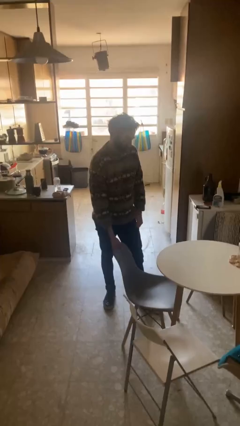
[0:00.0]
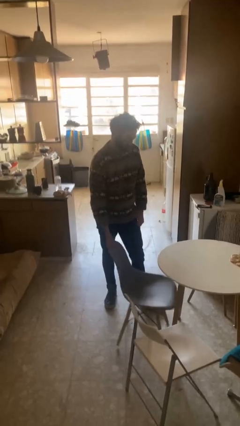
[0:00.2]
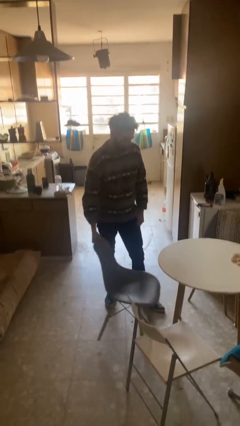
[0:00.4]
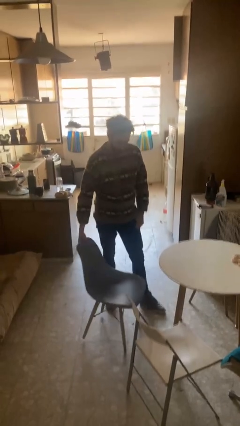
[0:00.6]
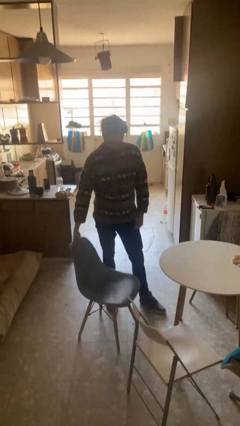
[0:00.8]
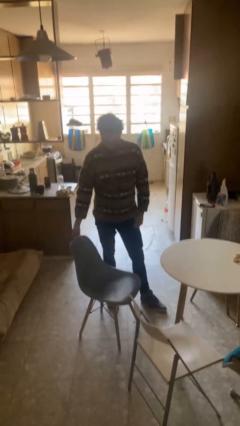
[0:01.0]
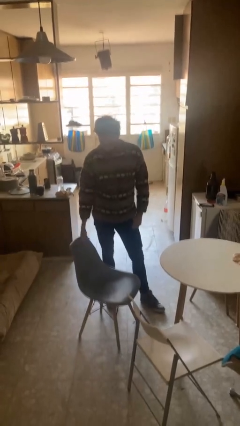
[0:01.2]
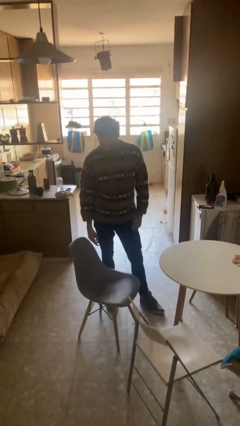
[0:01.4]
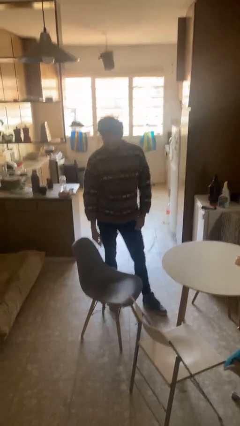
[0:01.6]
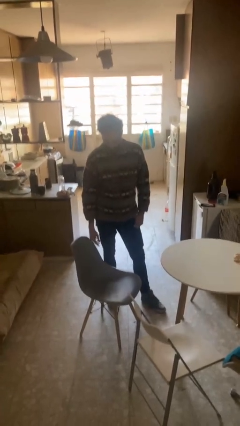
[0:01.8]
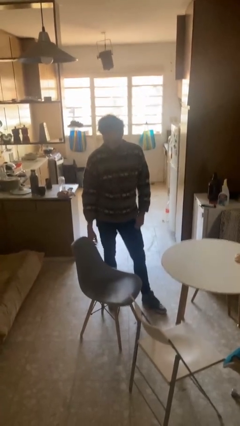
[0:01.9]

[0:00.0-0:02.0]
person pulls out chair

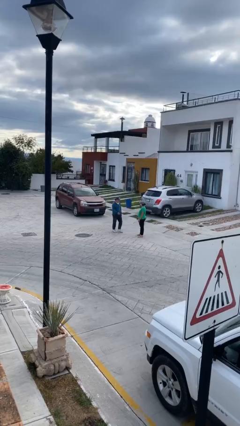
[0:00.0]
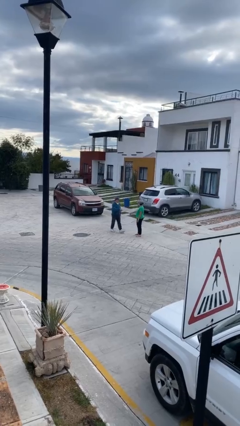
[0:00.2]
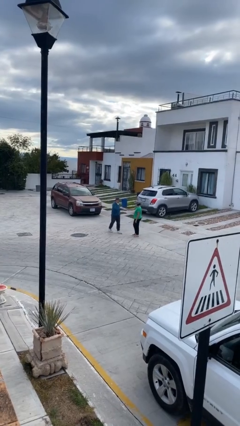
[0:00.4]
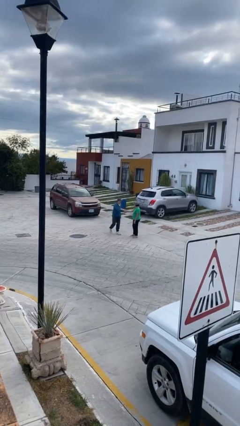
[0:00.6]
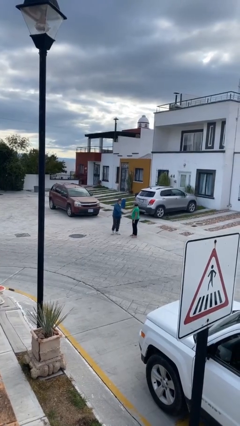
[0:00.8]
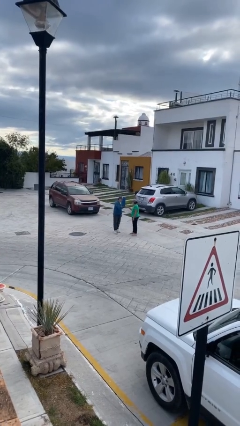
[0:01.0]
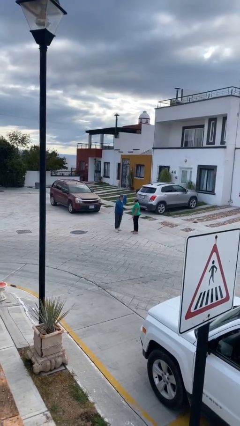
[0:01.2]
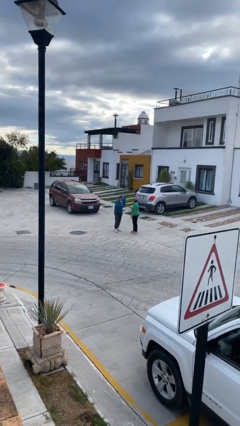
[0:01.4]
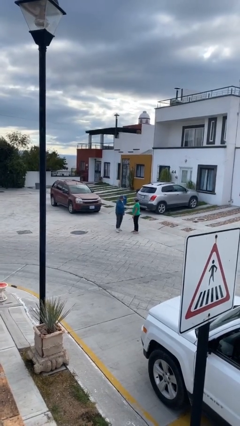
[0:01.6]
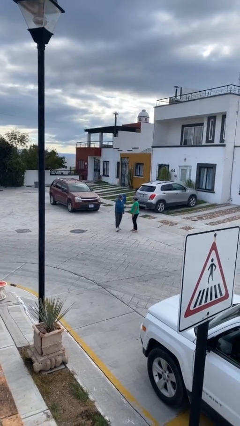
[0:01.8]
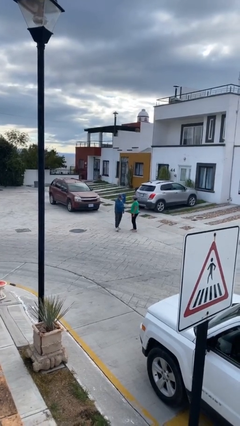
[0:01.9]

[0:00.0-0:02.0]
person shakes hand

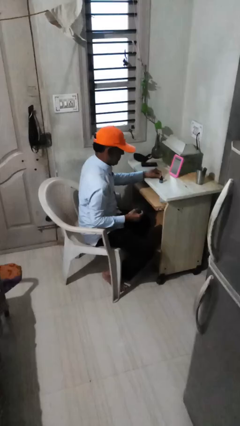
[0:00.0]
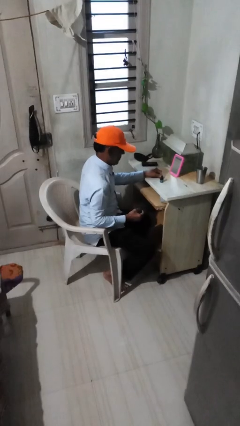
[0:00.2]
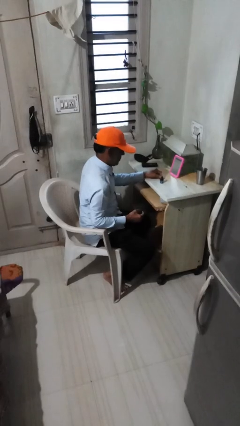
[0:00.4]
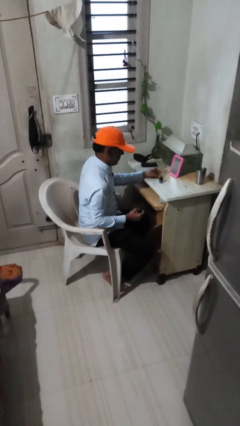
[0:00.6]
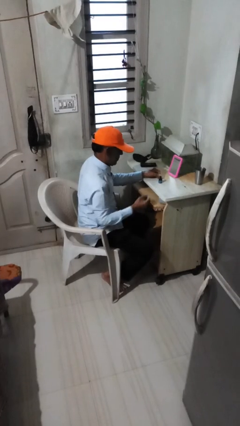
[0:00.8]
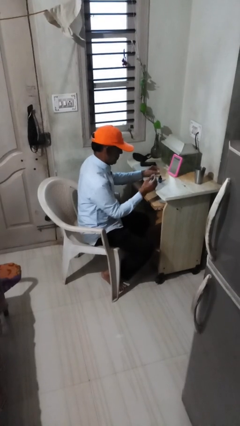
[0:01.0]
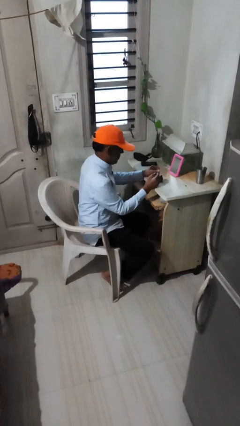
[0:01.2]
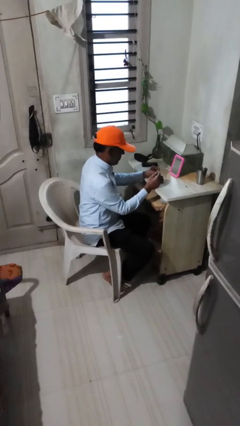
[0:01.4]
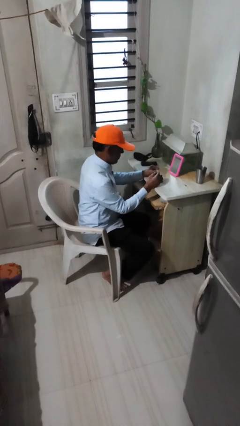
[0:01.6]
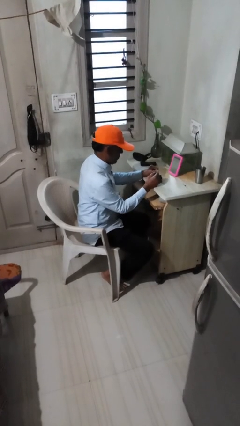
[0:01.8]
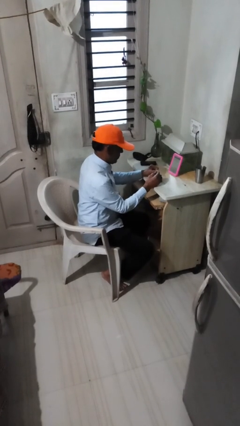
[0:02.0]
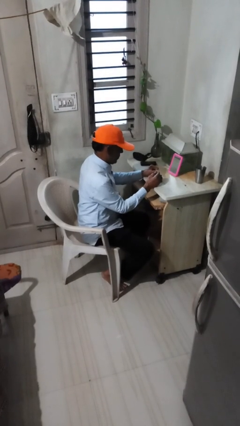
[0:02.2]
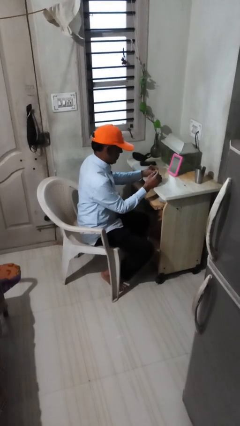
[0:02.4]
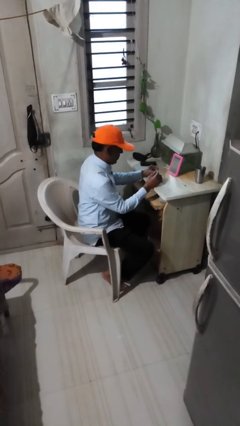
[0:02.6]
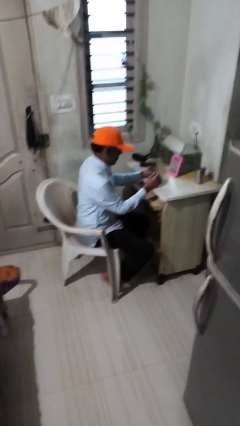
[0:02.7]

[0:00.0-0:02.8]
person paints fingernails

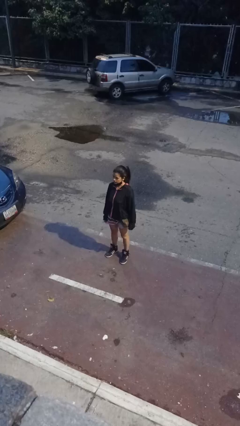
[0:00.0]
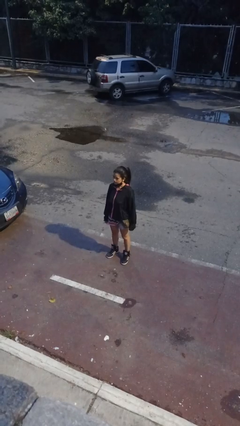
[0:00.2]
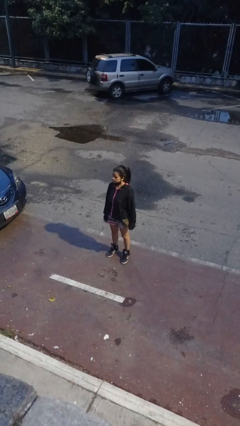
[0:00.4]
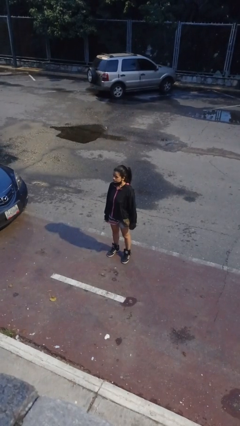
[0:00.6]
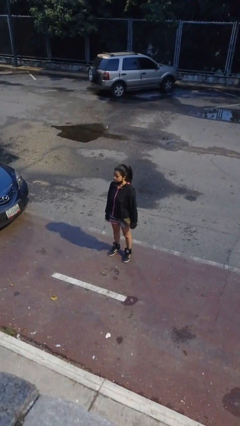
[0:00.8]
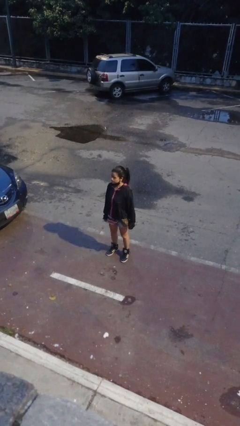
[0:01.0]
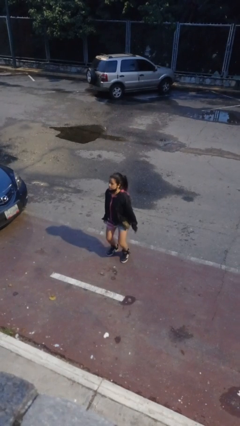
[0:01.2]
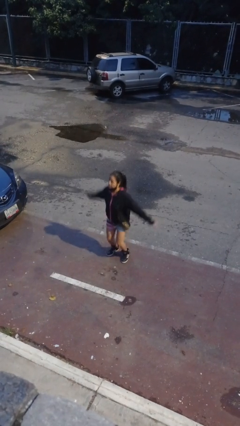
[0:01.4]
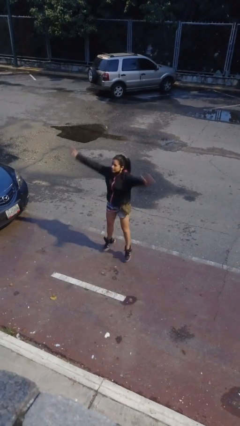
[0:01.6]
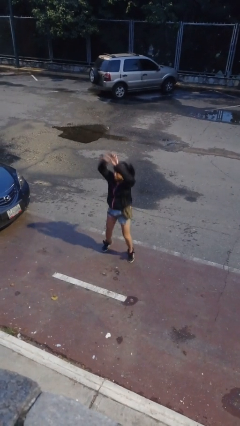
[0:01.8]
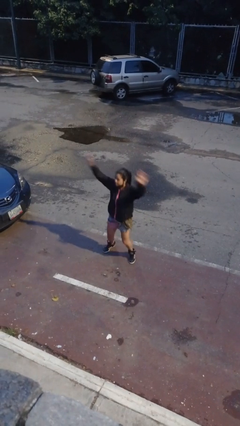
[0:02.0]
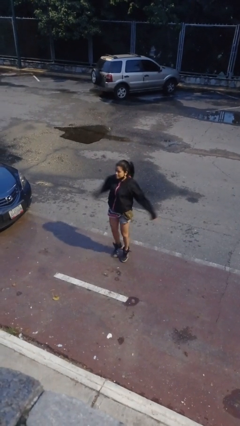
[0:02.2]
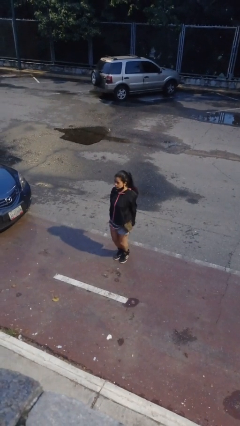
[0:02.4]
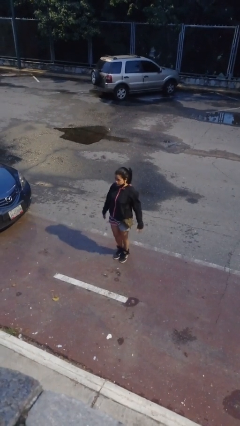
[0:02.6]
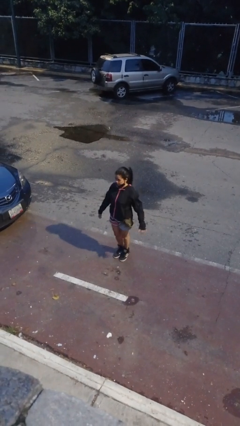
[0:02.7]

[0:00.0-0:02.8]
person exercises with jumping jacks

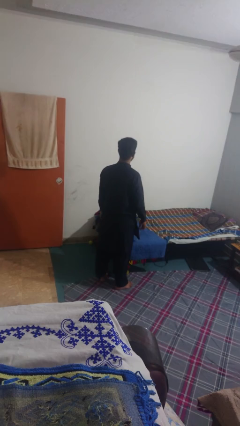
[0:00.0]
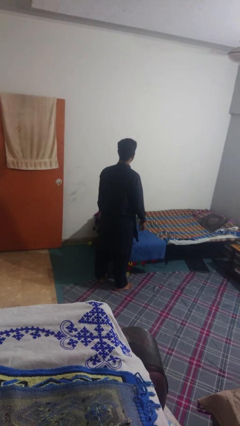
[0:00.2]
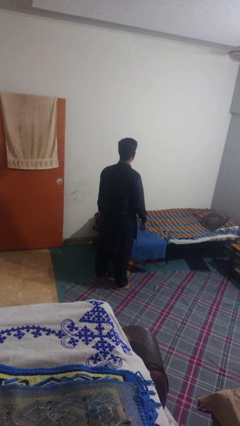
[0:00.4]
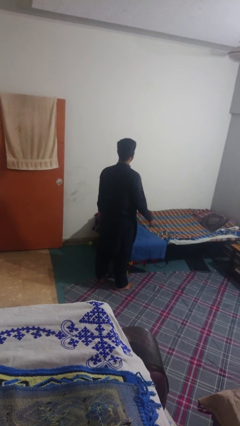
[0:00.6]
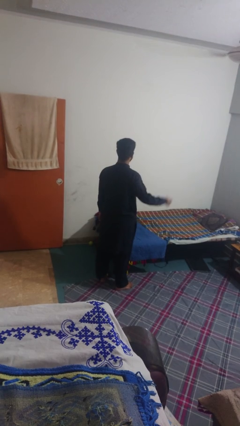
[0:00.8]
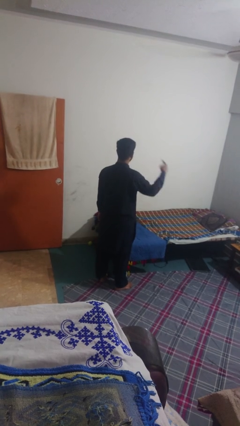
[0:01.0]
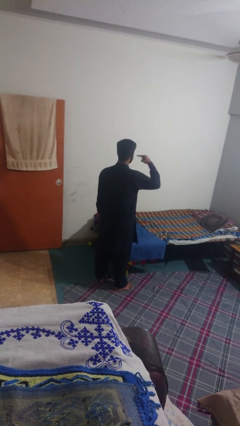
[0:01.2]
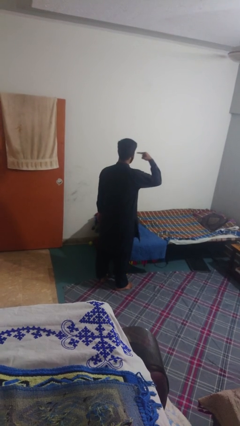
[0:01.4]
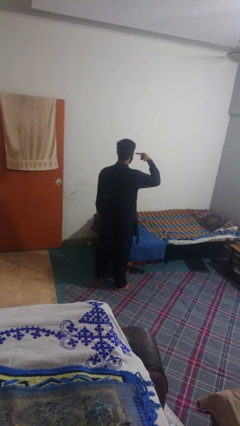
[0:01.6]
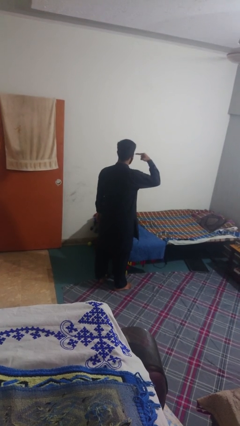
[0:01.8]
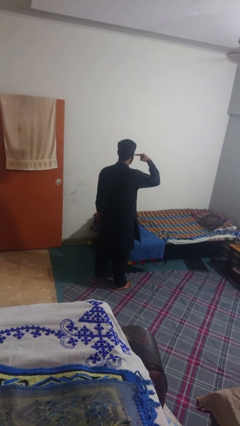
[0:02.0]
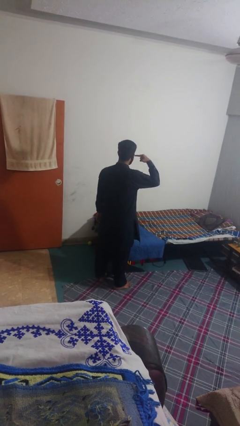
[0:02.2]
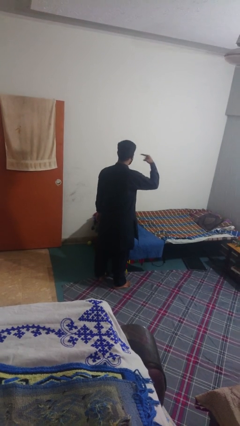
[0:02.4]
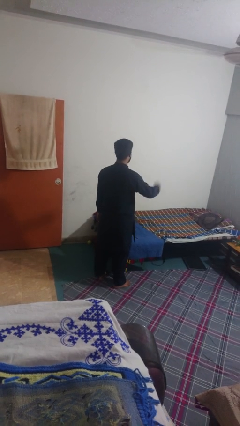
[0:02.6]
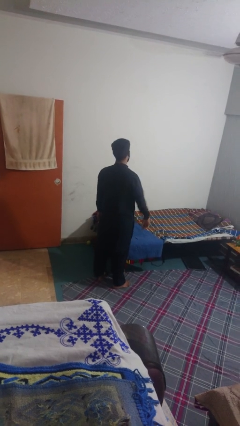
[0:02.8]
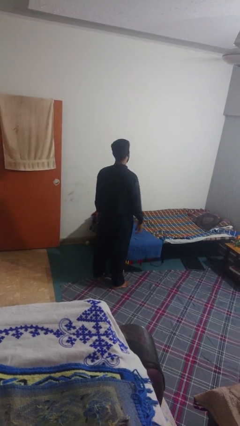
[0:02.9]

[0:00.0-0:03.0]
person gestures listen closely

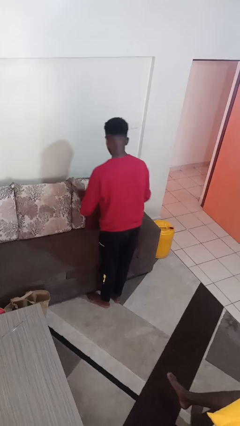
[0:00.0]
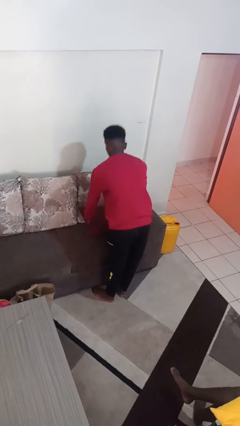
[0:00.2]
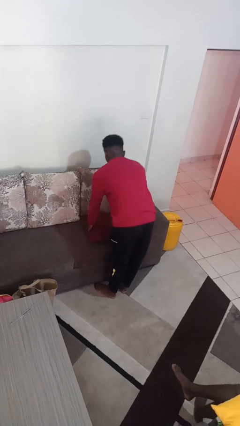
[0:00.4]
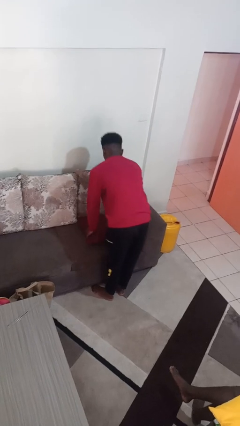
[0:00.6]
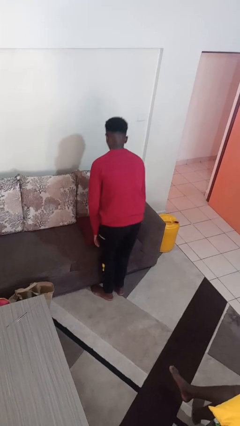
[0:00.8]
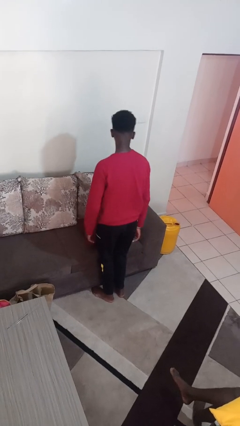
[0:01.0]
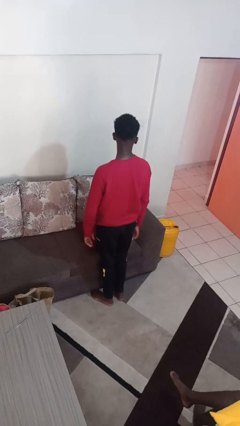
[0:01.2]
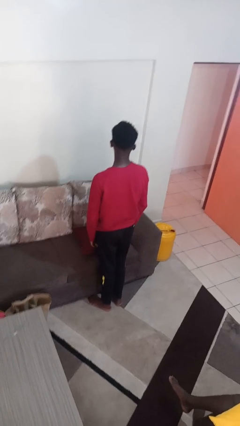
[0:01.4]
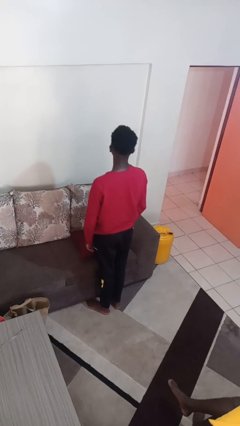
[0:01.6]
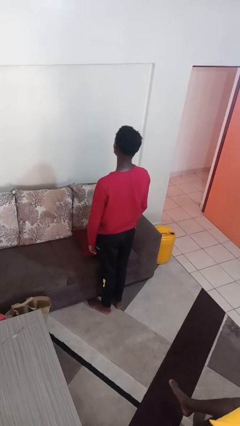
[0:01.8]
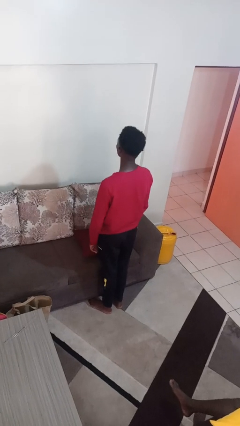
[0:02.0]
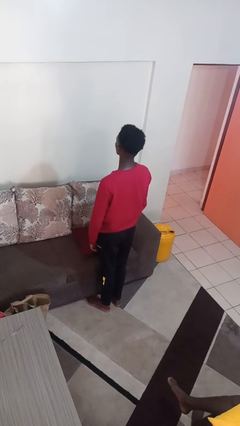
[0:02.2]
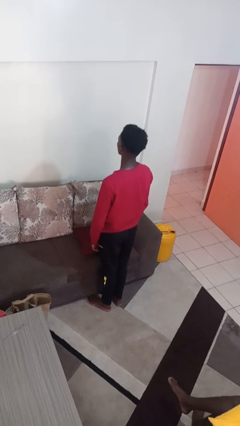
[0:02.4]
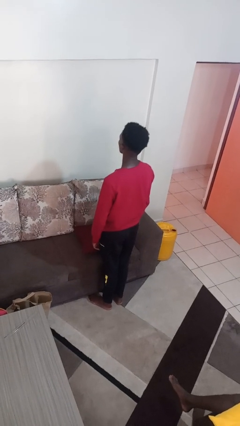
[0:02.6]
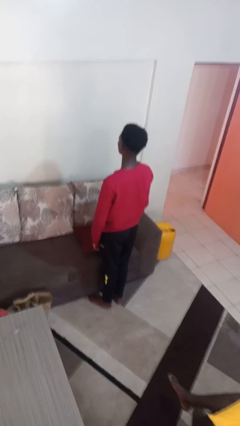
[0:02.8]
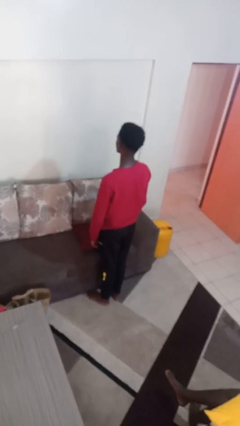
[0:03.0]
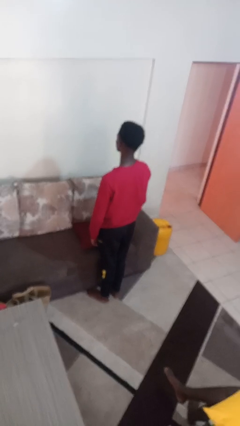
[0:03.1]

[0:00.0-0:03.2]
person puts down object on couch

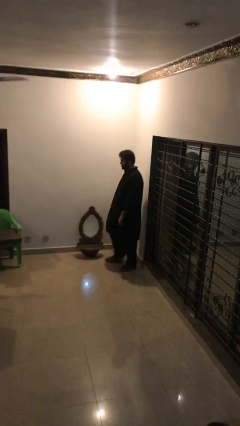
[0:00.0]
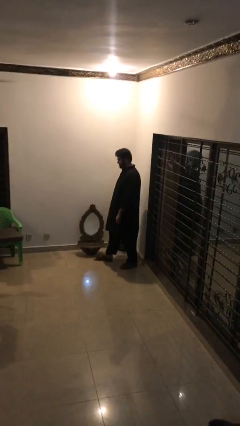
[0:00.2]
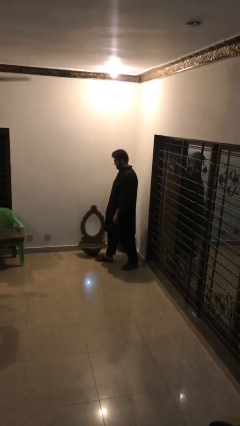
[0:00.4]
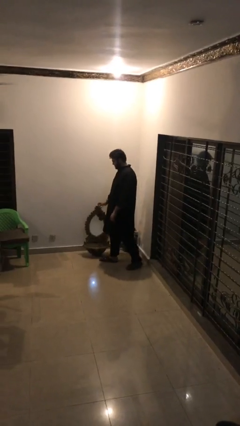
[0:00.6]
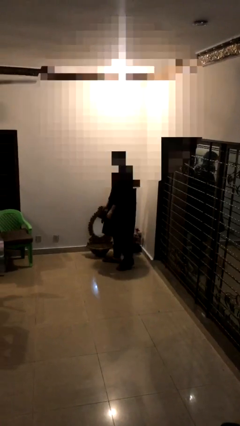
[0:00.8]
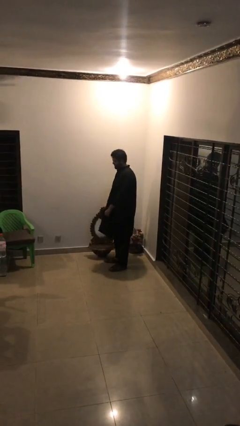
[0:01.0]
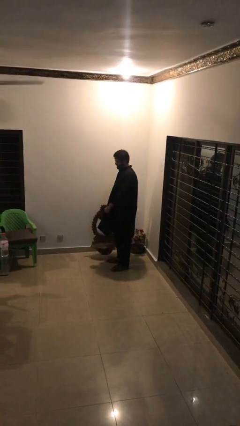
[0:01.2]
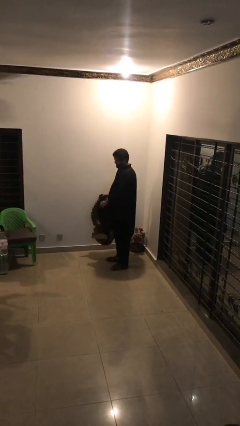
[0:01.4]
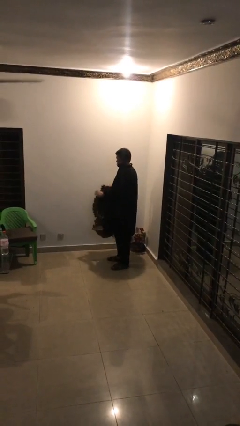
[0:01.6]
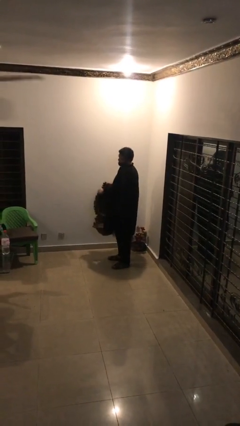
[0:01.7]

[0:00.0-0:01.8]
person picks up object from floor
